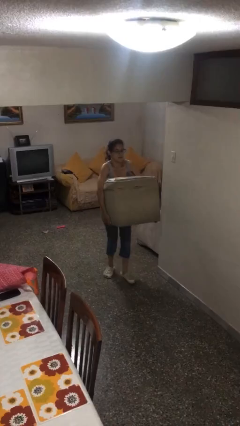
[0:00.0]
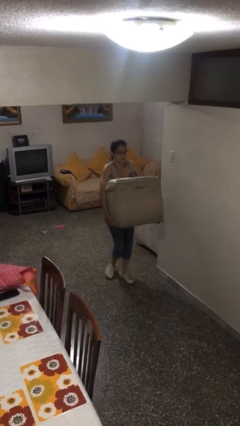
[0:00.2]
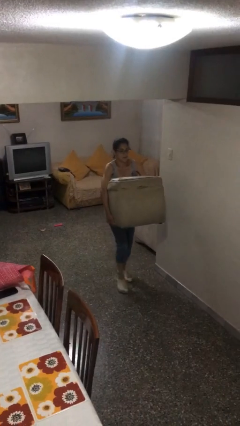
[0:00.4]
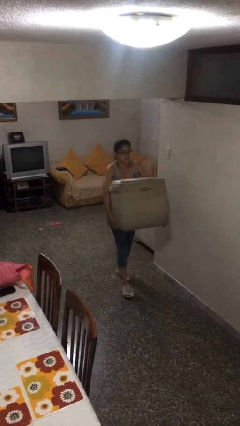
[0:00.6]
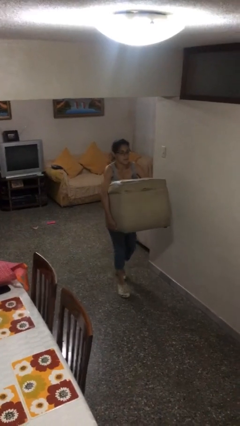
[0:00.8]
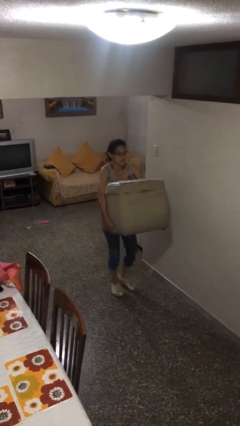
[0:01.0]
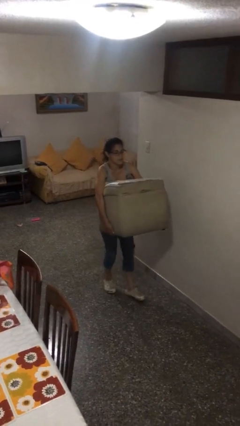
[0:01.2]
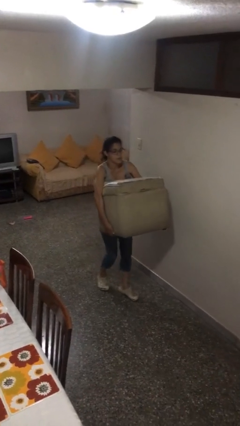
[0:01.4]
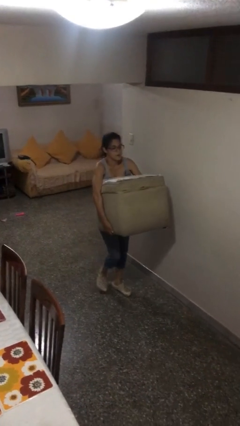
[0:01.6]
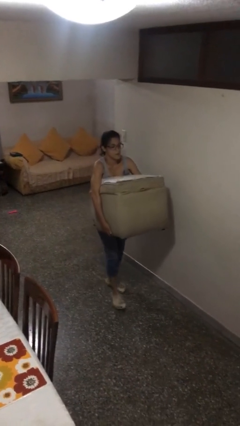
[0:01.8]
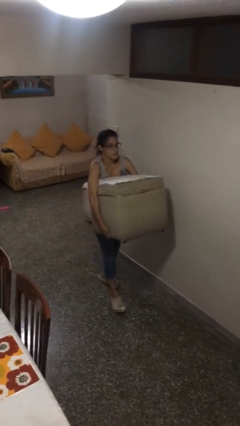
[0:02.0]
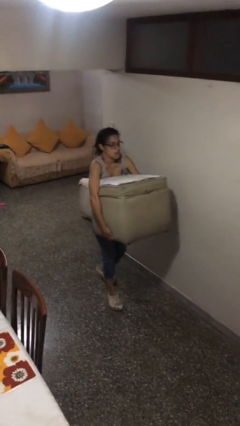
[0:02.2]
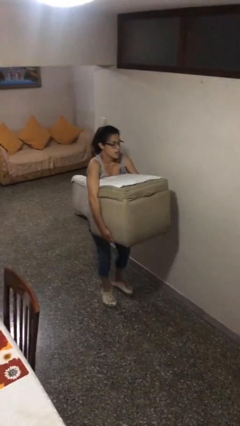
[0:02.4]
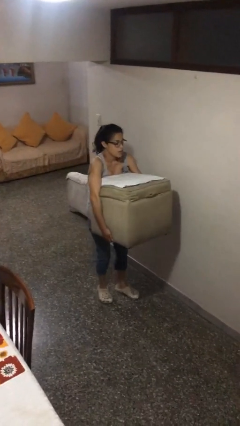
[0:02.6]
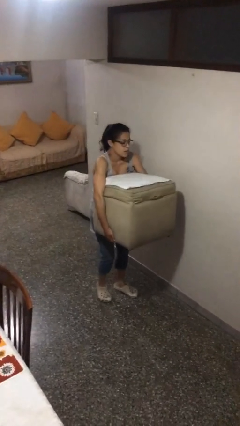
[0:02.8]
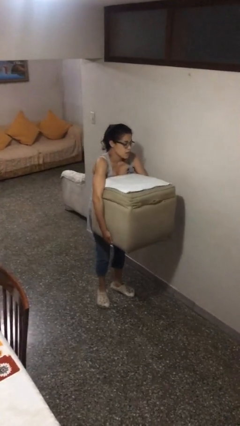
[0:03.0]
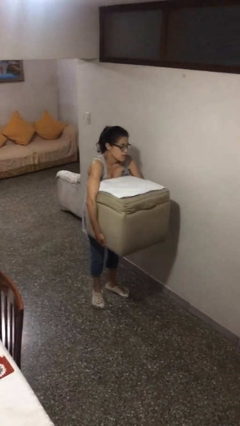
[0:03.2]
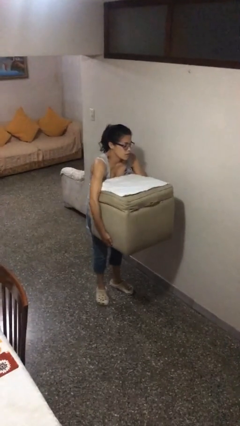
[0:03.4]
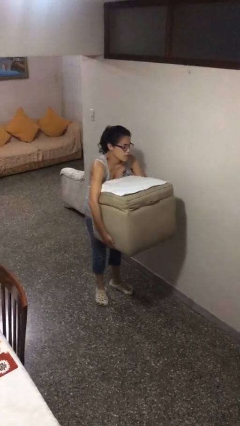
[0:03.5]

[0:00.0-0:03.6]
person carries heavy object

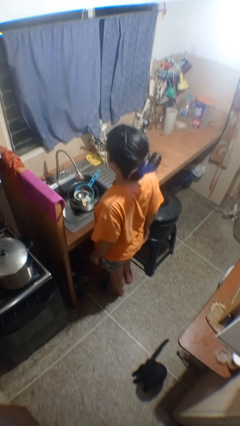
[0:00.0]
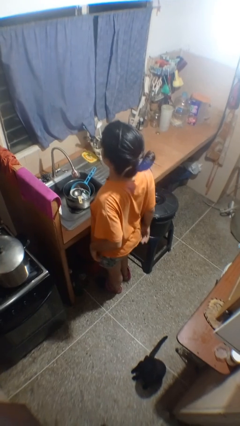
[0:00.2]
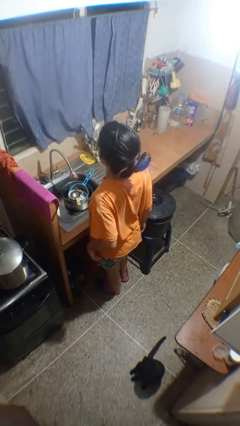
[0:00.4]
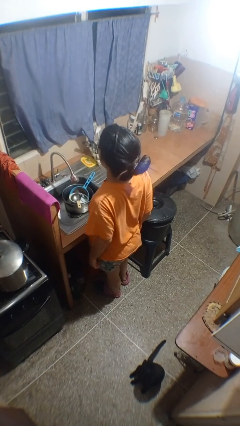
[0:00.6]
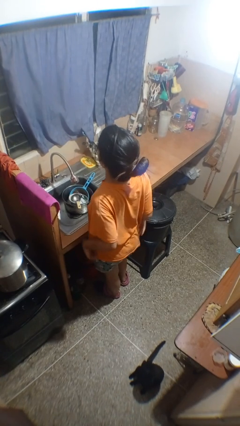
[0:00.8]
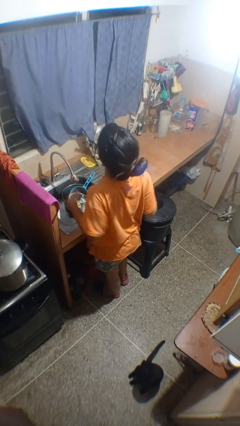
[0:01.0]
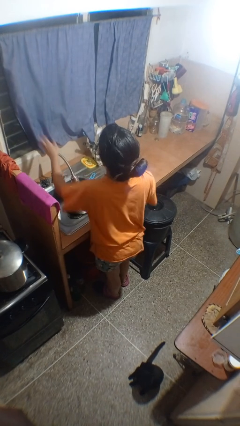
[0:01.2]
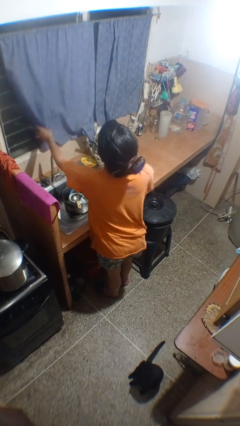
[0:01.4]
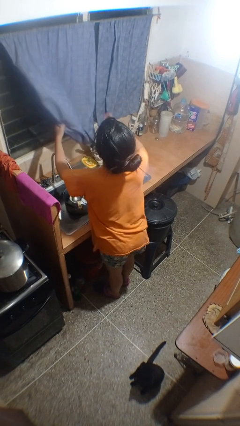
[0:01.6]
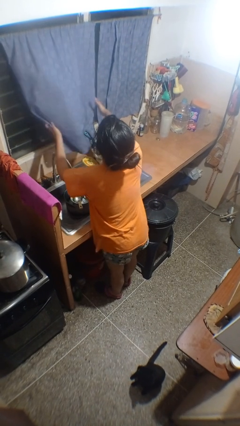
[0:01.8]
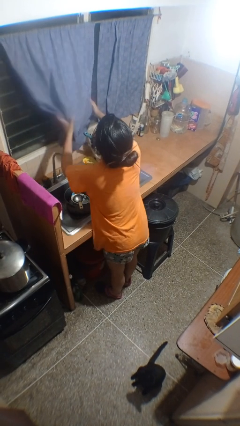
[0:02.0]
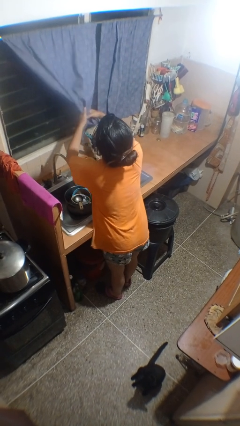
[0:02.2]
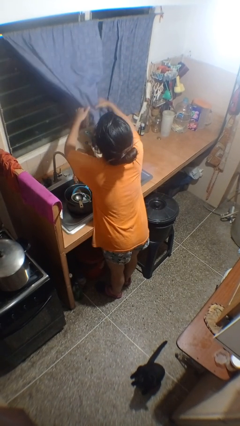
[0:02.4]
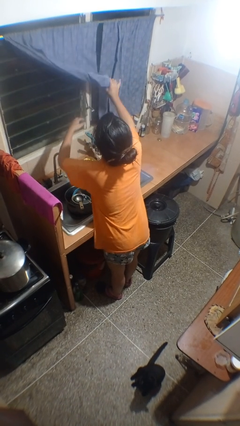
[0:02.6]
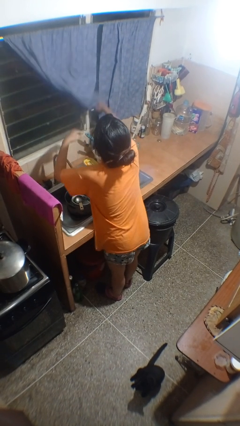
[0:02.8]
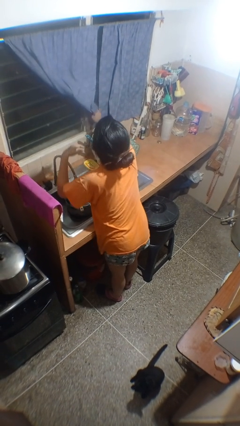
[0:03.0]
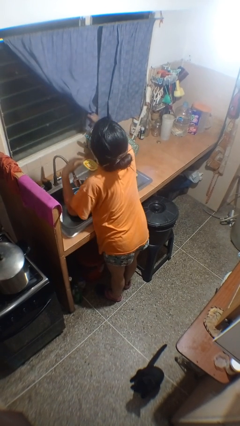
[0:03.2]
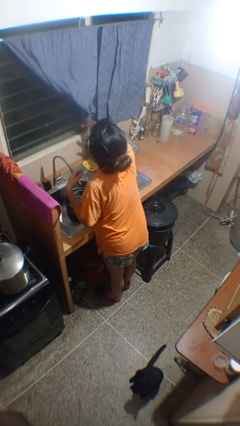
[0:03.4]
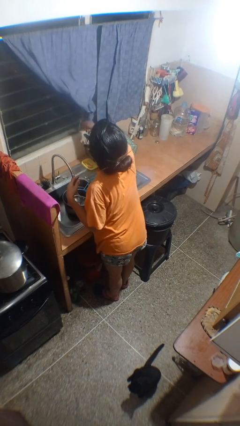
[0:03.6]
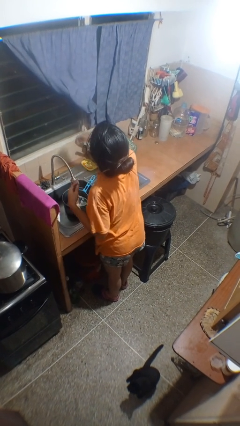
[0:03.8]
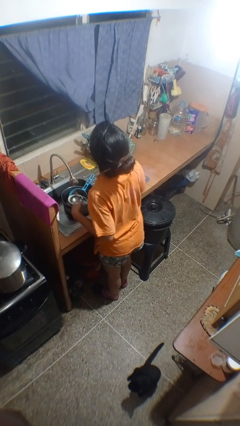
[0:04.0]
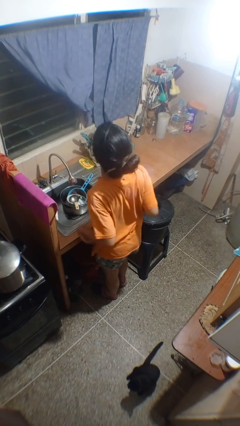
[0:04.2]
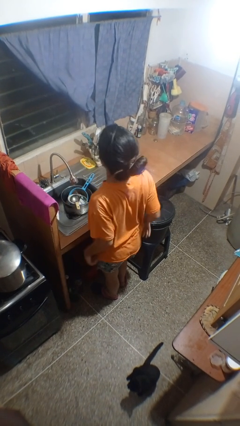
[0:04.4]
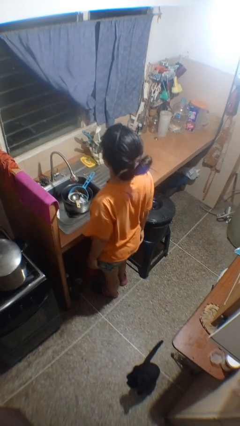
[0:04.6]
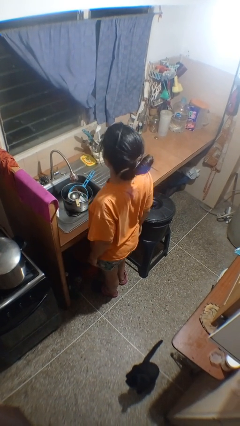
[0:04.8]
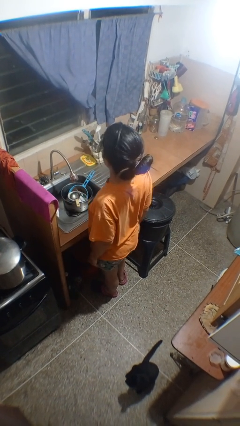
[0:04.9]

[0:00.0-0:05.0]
person opens curtains

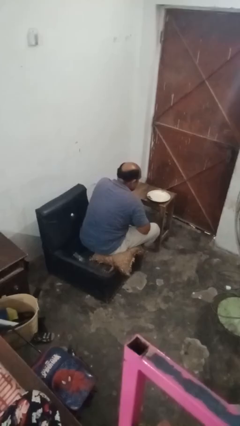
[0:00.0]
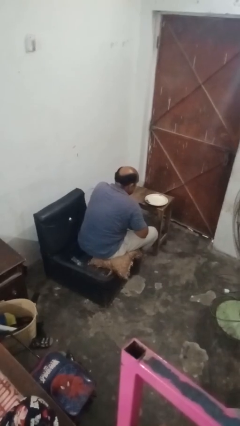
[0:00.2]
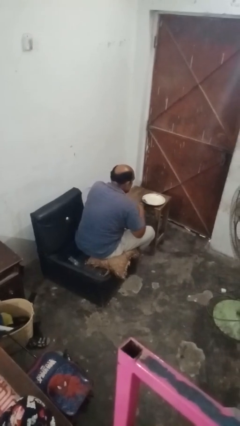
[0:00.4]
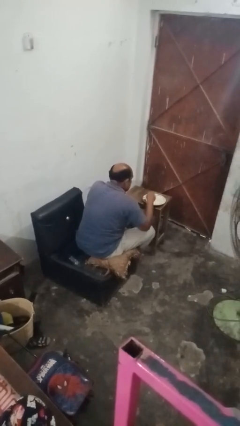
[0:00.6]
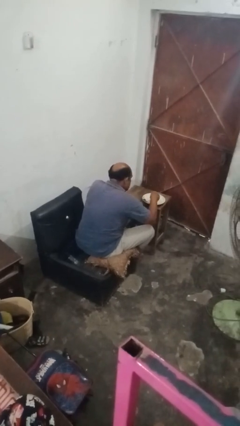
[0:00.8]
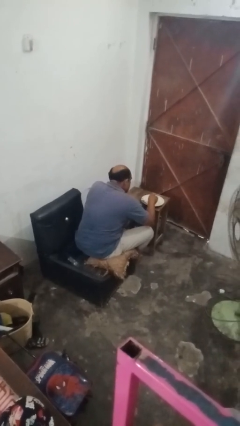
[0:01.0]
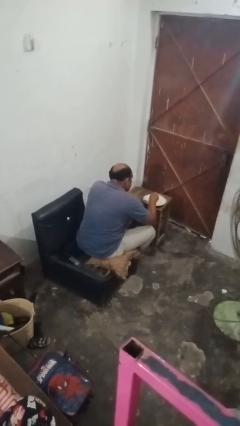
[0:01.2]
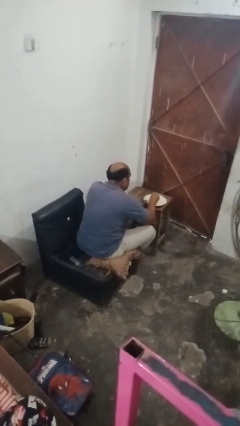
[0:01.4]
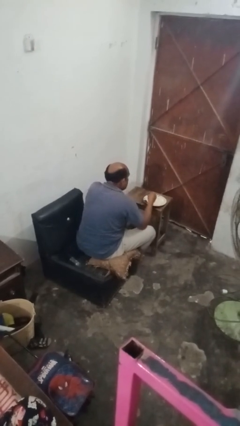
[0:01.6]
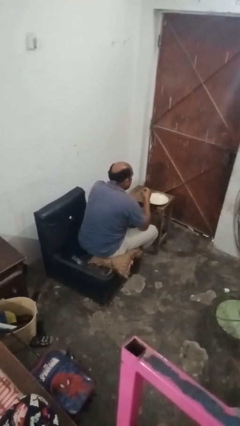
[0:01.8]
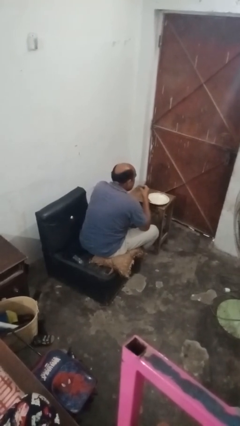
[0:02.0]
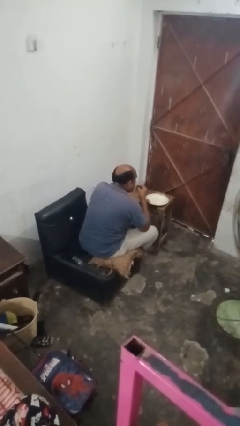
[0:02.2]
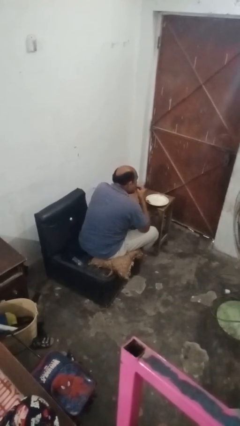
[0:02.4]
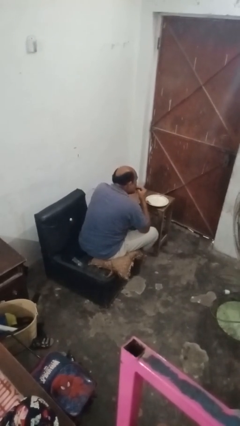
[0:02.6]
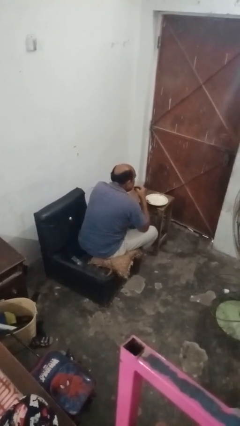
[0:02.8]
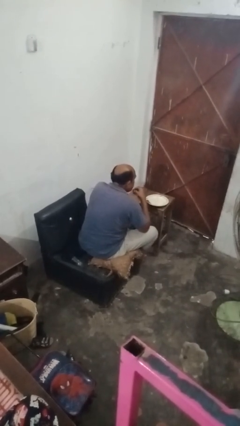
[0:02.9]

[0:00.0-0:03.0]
person eats with hands

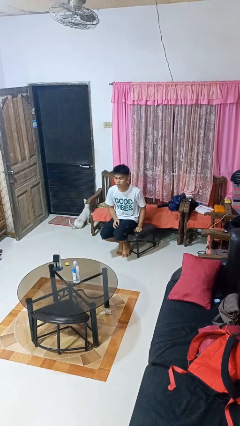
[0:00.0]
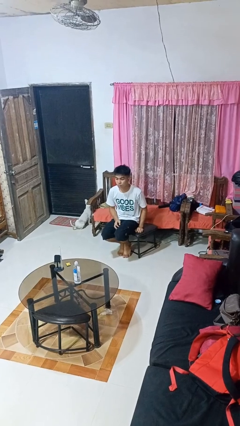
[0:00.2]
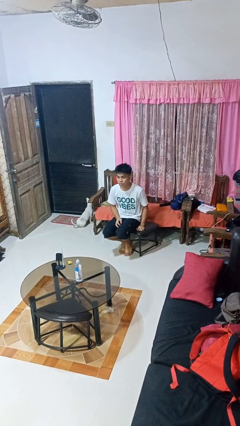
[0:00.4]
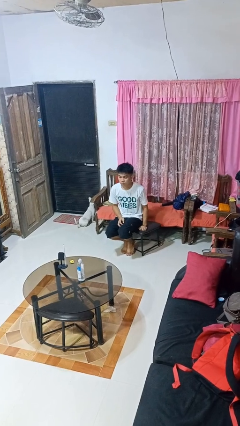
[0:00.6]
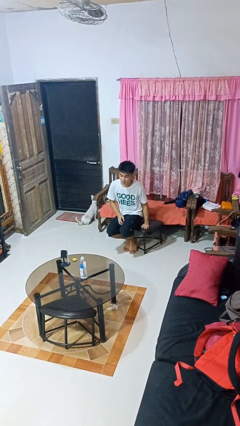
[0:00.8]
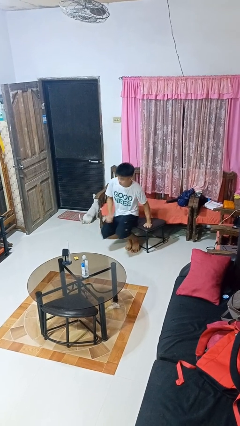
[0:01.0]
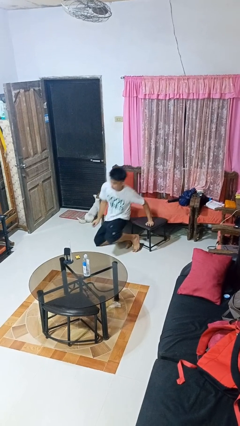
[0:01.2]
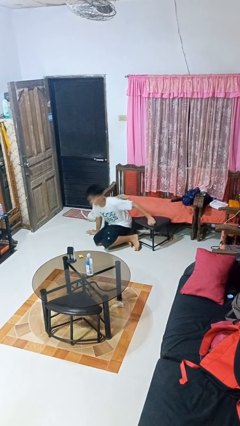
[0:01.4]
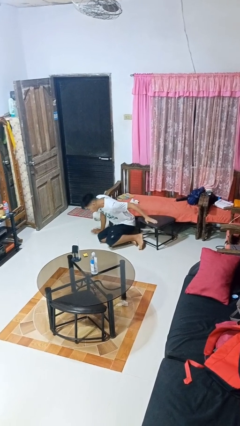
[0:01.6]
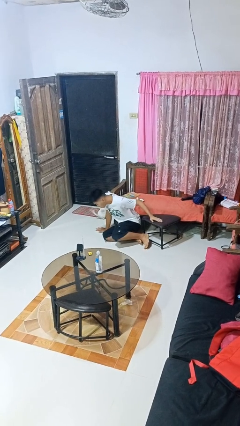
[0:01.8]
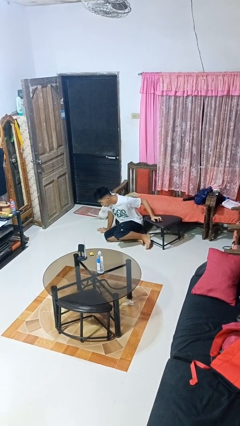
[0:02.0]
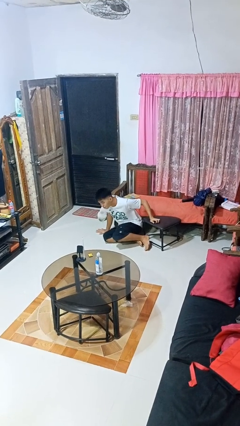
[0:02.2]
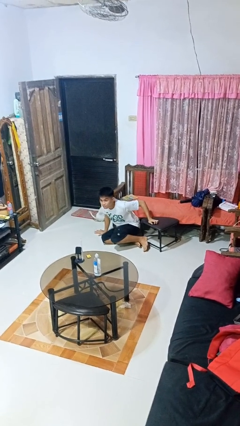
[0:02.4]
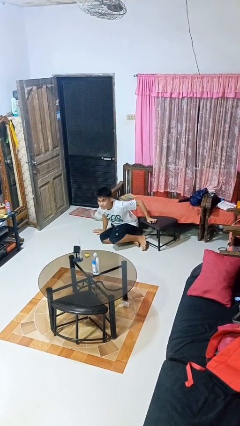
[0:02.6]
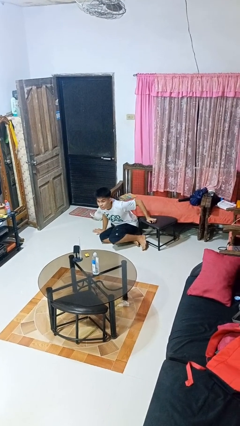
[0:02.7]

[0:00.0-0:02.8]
person falls from chair

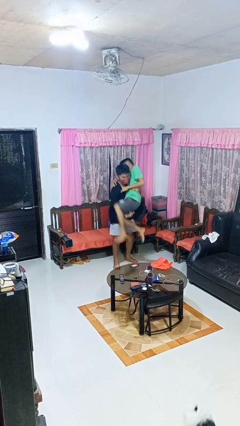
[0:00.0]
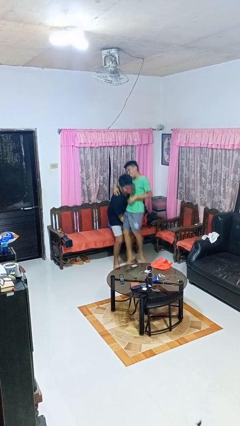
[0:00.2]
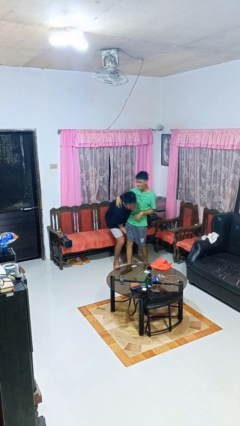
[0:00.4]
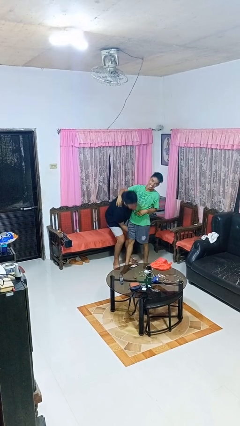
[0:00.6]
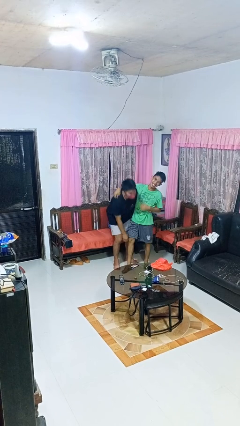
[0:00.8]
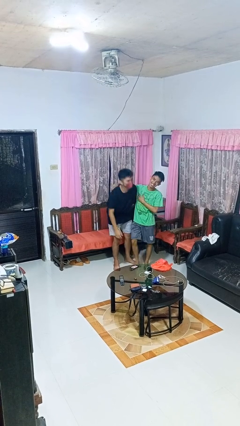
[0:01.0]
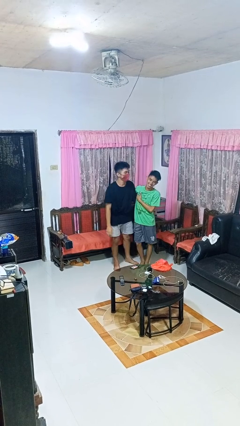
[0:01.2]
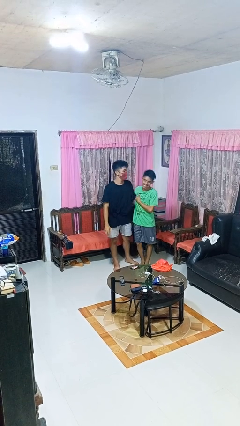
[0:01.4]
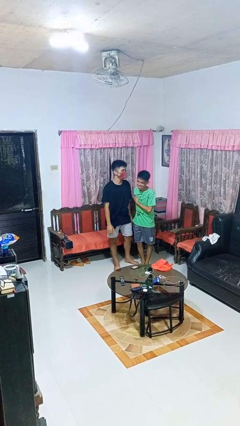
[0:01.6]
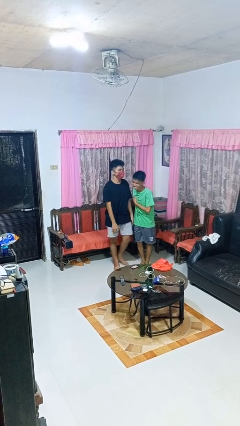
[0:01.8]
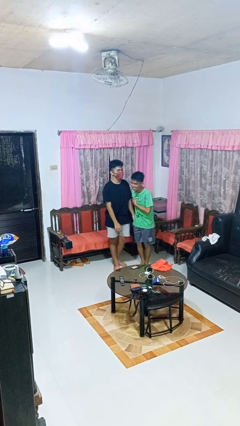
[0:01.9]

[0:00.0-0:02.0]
person puts down person

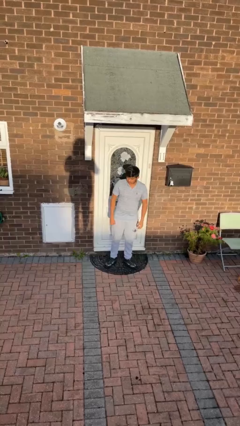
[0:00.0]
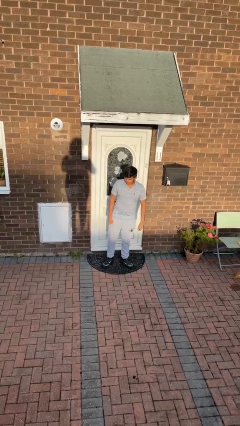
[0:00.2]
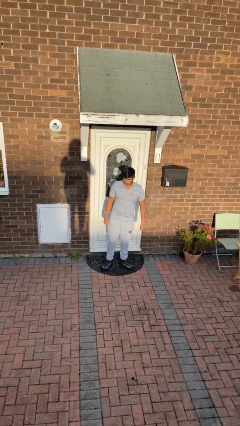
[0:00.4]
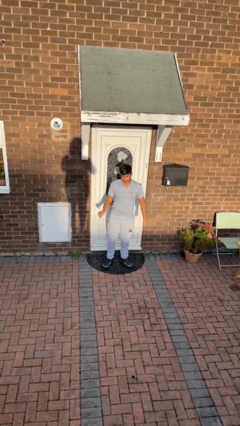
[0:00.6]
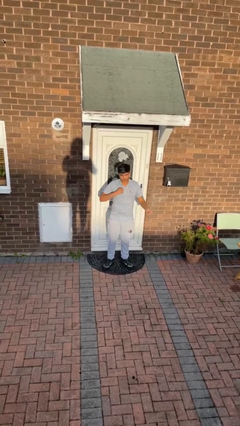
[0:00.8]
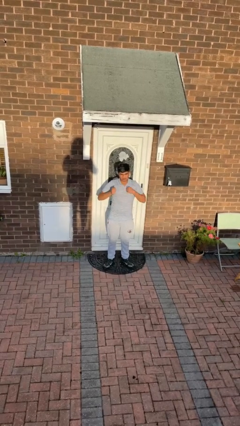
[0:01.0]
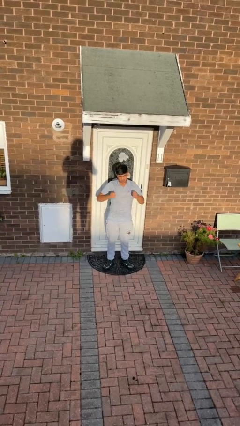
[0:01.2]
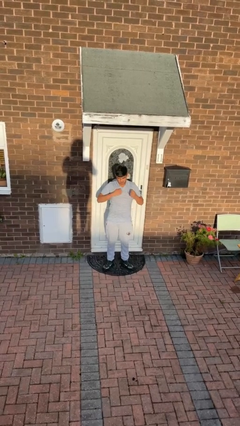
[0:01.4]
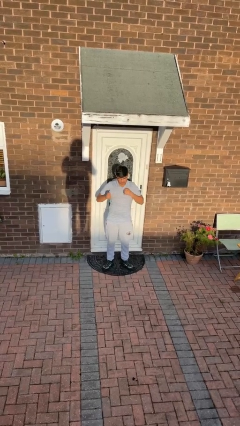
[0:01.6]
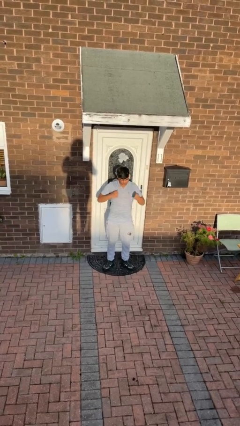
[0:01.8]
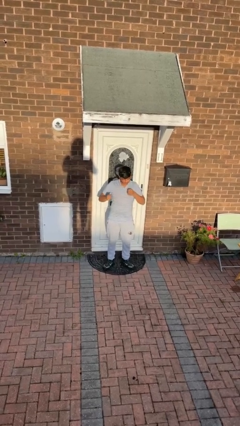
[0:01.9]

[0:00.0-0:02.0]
person drums on chest
